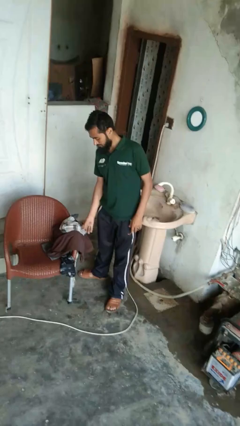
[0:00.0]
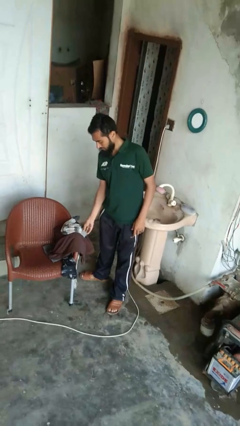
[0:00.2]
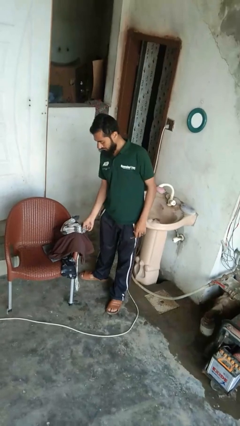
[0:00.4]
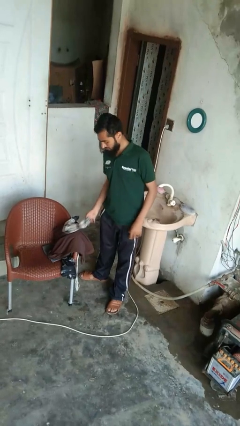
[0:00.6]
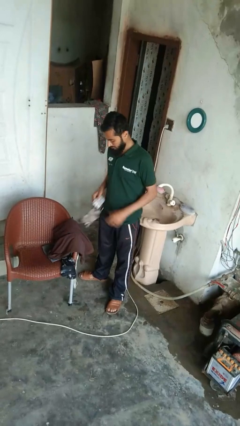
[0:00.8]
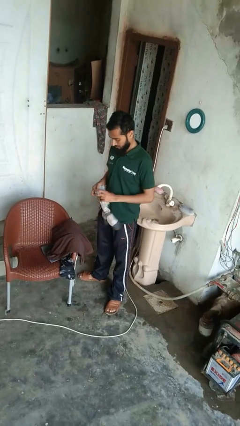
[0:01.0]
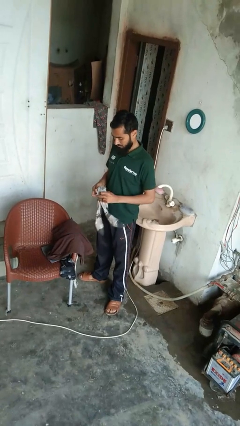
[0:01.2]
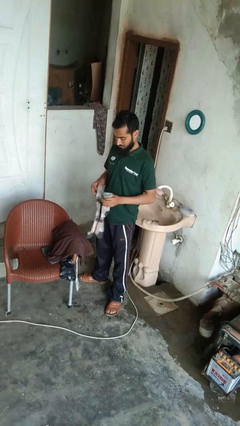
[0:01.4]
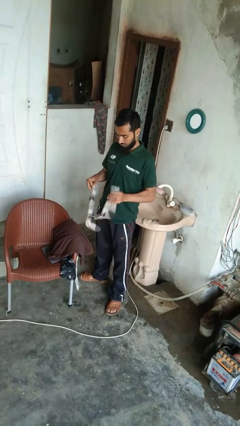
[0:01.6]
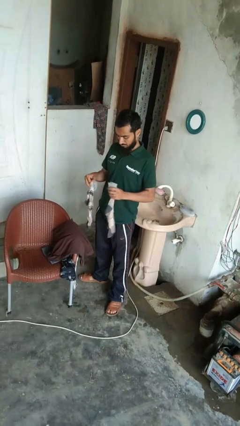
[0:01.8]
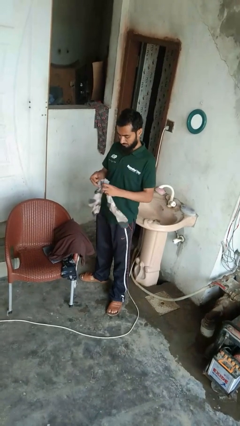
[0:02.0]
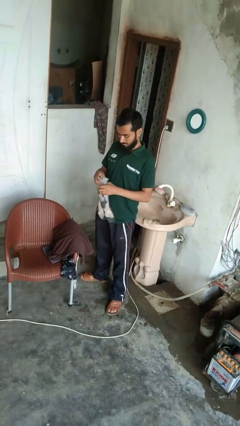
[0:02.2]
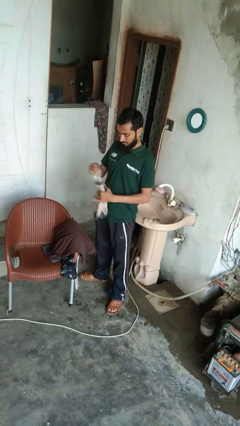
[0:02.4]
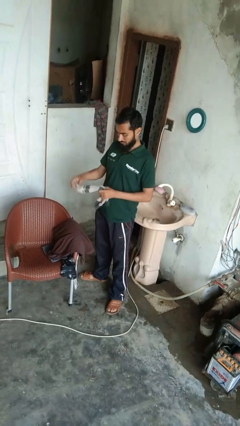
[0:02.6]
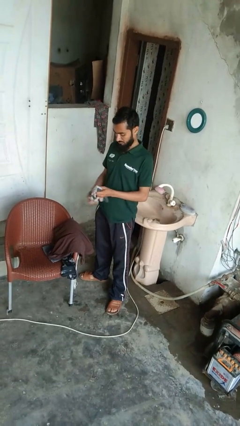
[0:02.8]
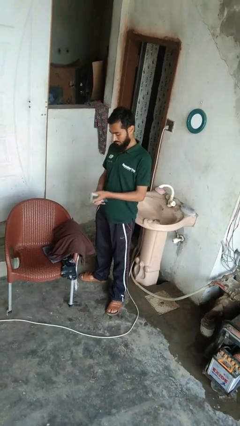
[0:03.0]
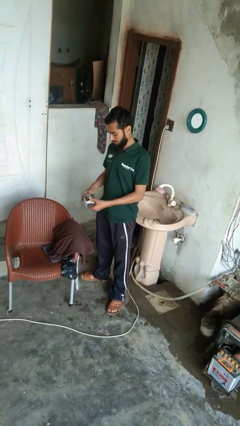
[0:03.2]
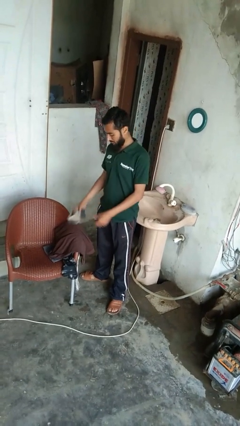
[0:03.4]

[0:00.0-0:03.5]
person folds socks

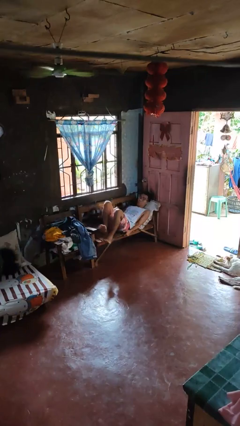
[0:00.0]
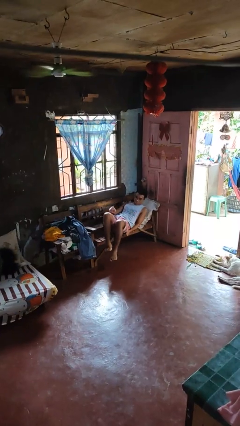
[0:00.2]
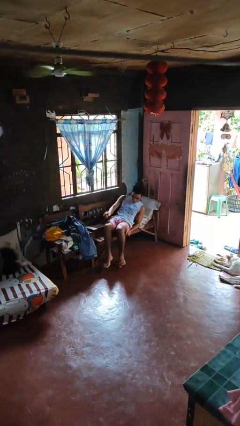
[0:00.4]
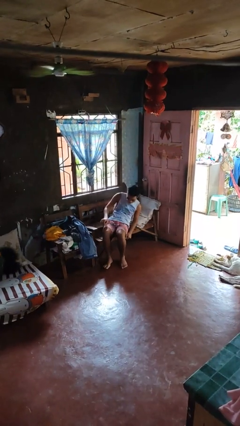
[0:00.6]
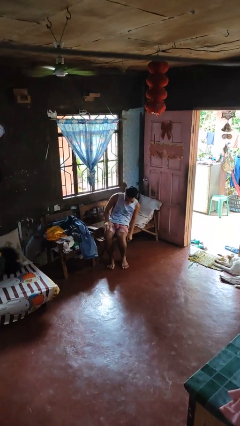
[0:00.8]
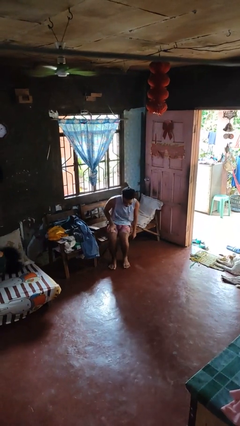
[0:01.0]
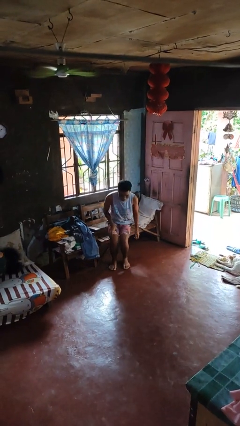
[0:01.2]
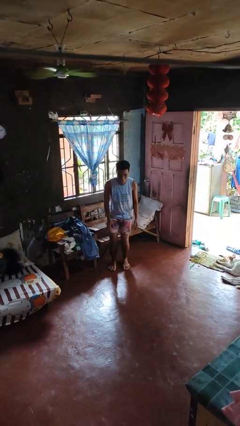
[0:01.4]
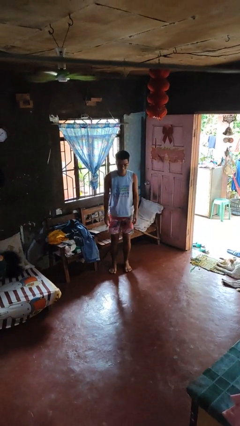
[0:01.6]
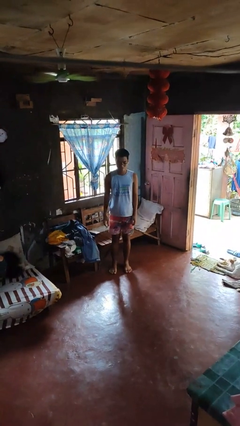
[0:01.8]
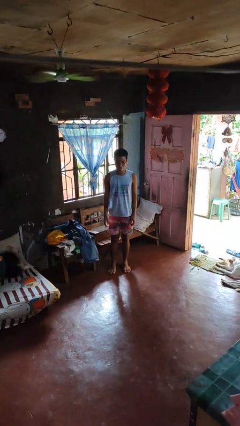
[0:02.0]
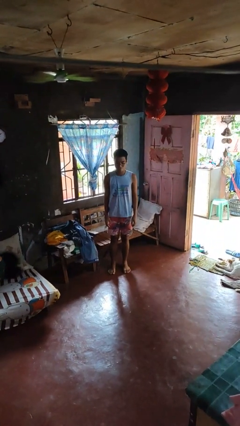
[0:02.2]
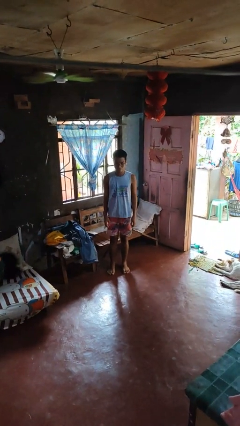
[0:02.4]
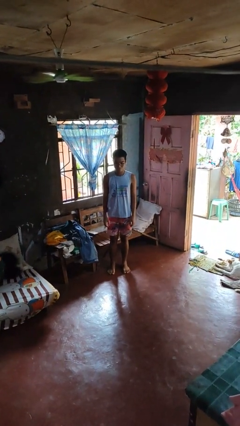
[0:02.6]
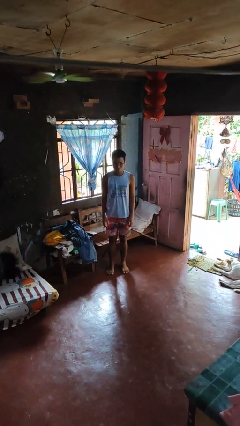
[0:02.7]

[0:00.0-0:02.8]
person stands up

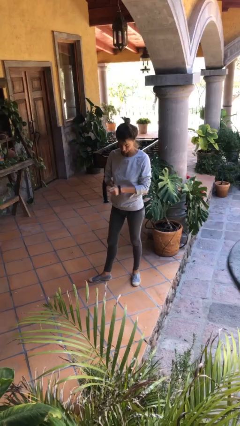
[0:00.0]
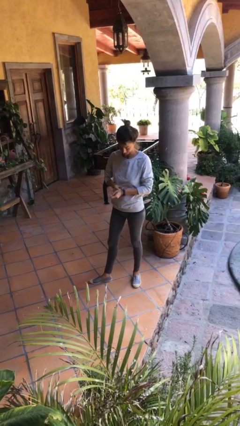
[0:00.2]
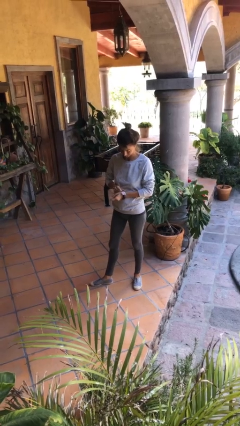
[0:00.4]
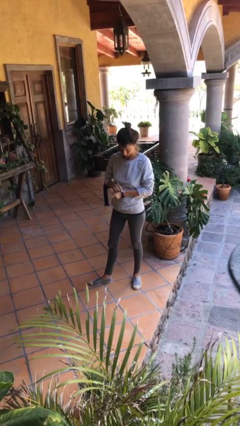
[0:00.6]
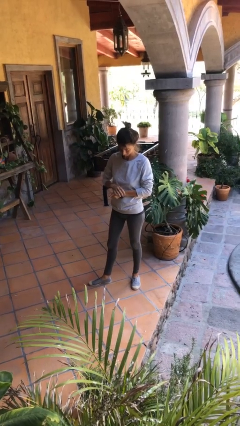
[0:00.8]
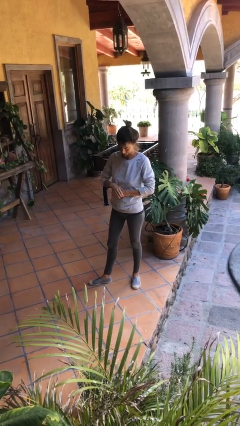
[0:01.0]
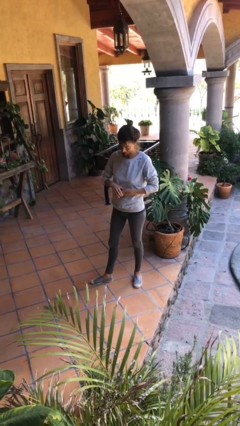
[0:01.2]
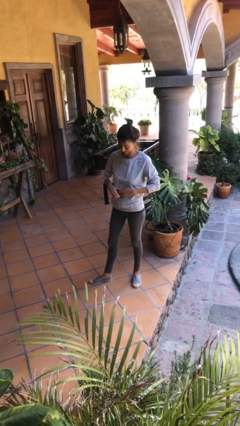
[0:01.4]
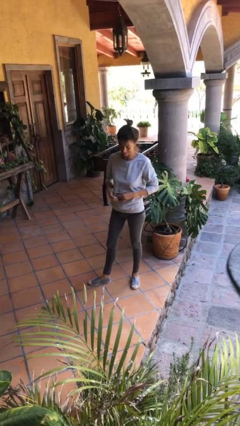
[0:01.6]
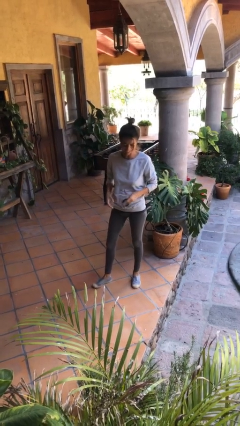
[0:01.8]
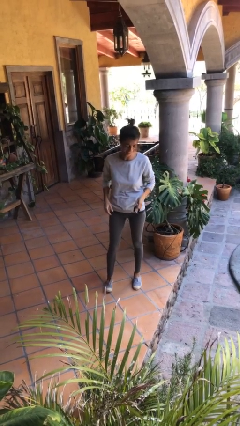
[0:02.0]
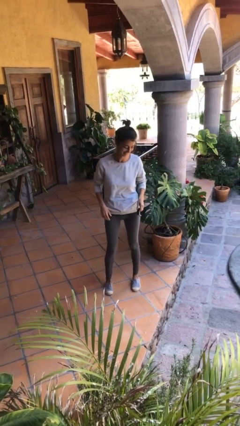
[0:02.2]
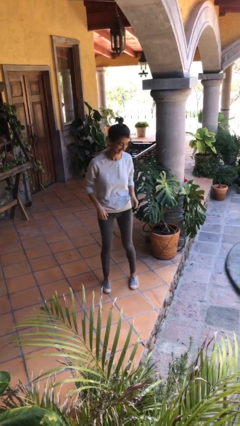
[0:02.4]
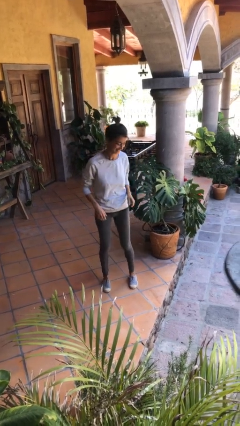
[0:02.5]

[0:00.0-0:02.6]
person takes off wristwatch

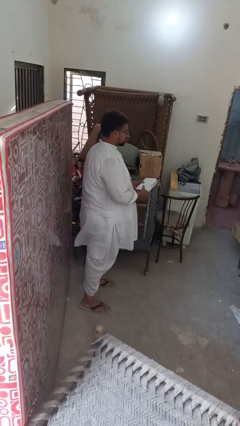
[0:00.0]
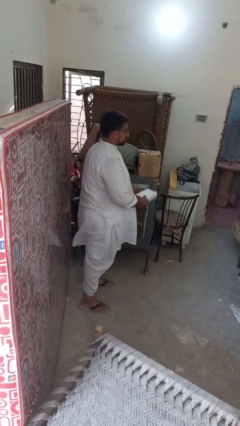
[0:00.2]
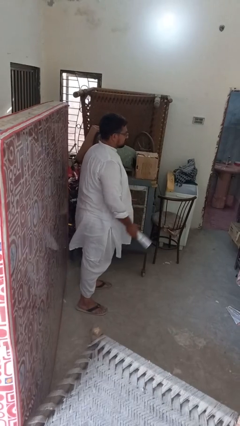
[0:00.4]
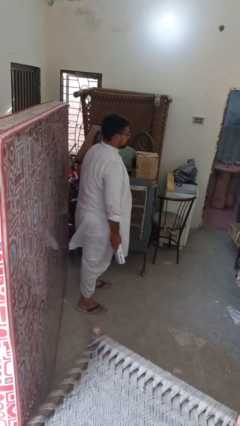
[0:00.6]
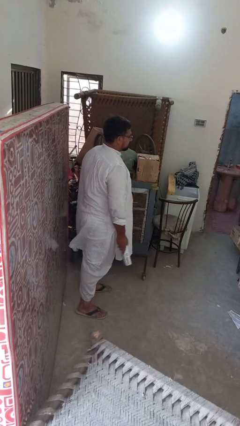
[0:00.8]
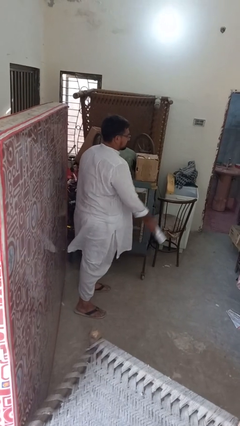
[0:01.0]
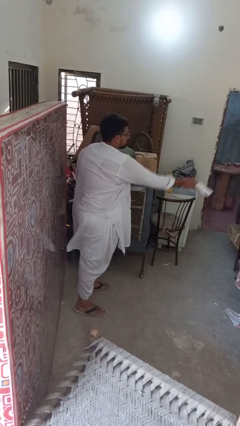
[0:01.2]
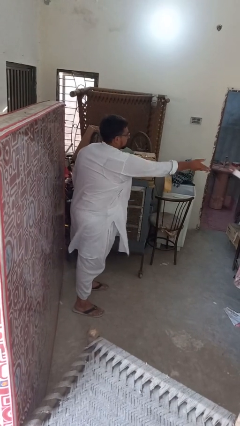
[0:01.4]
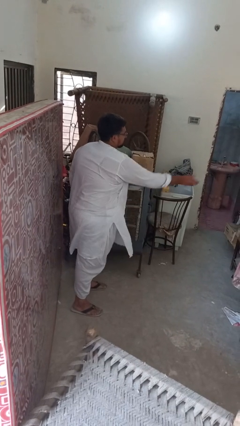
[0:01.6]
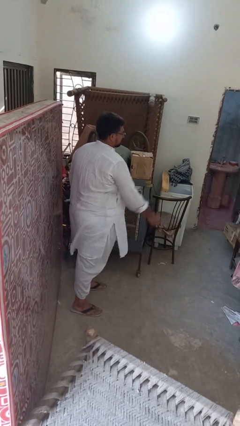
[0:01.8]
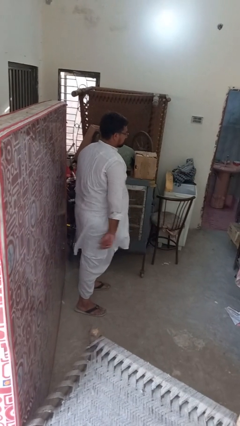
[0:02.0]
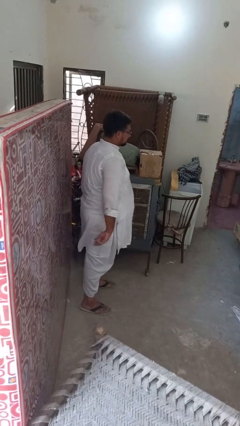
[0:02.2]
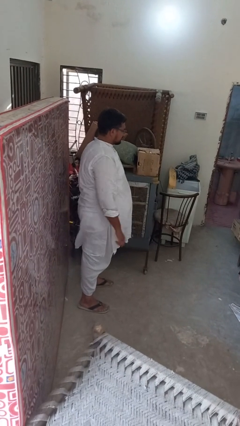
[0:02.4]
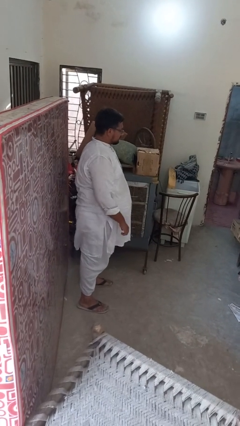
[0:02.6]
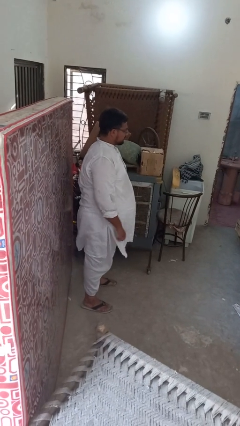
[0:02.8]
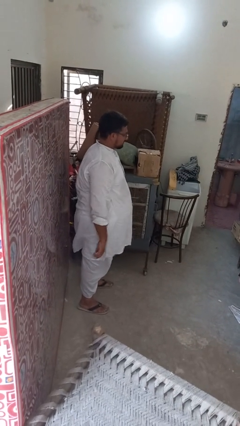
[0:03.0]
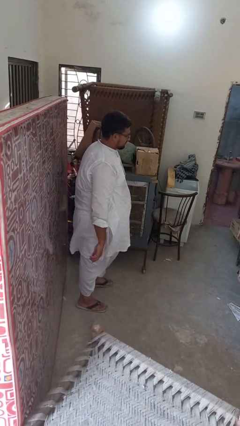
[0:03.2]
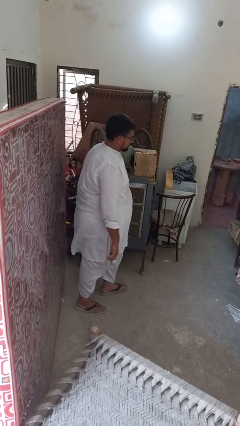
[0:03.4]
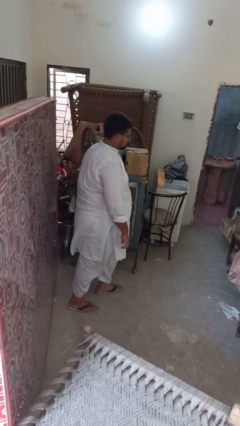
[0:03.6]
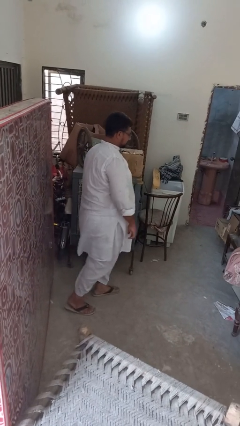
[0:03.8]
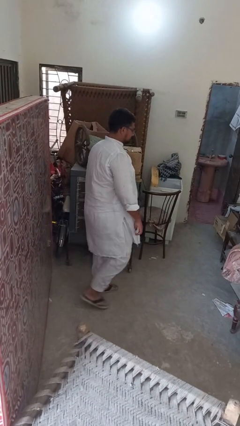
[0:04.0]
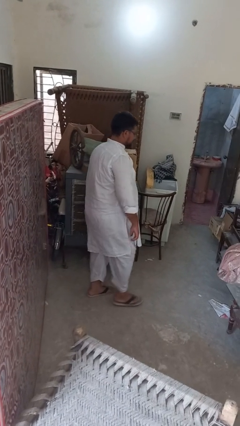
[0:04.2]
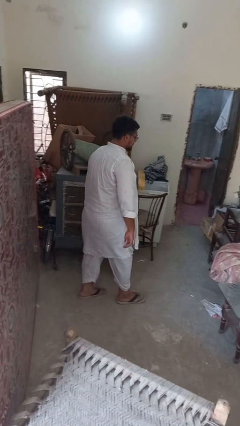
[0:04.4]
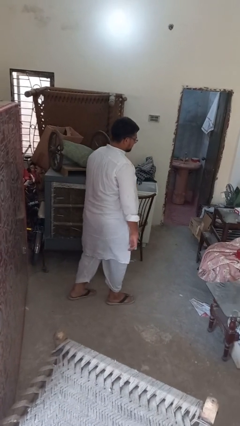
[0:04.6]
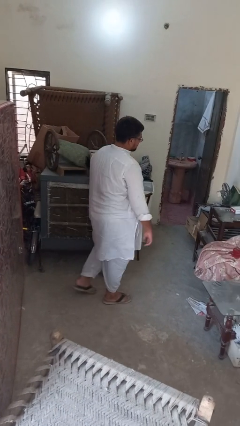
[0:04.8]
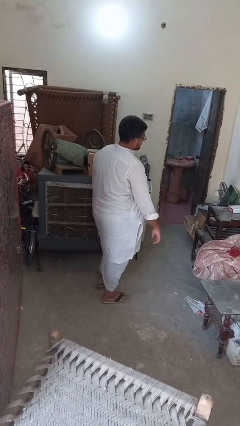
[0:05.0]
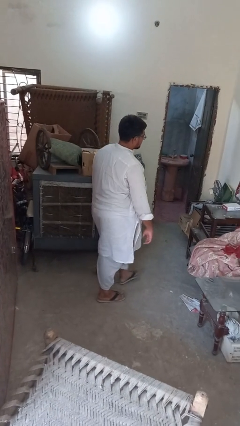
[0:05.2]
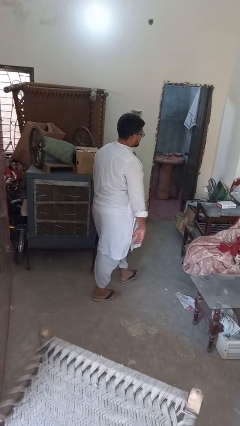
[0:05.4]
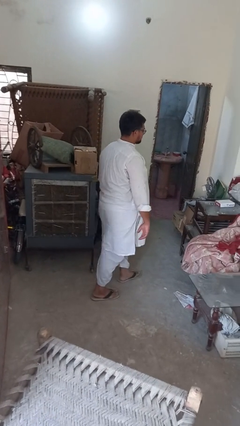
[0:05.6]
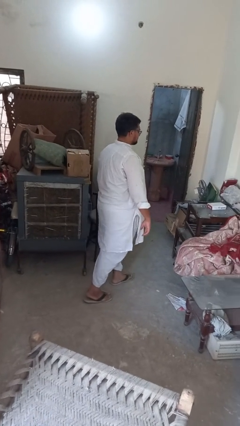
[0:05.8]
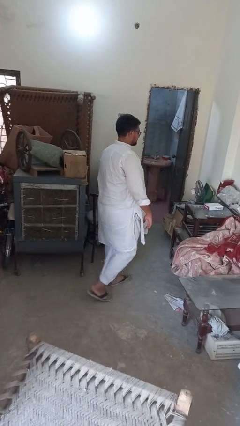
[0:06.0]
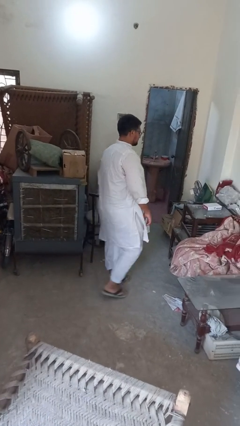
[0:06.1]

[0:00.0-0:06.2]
person throws object on table

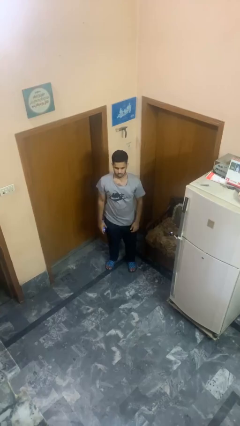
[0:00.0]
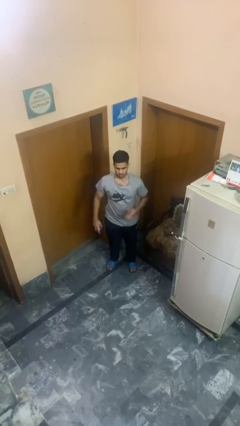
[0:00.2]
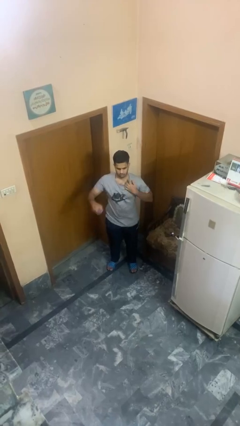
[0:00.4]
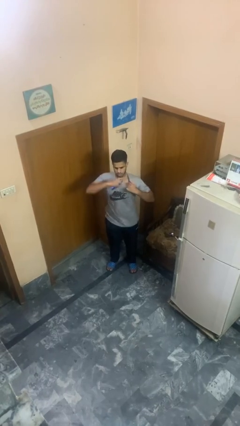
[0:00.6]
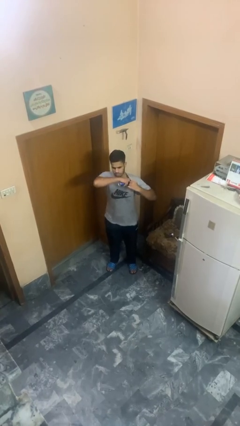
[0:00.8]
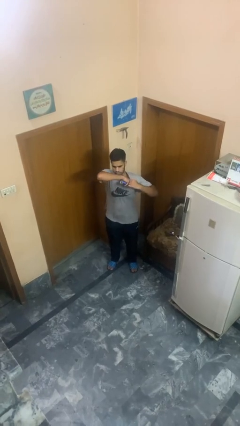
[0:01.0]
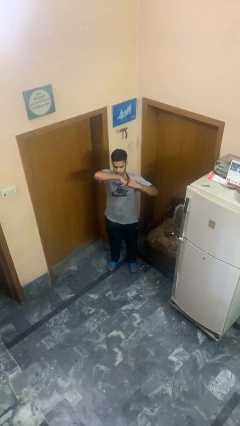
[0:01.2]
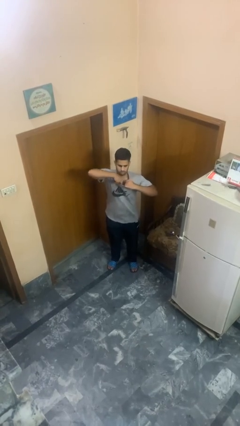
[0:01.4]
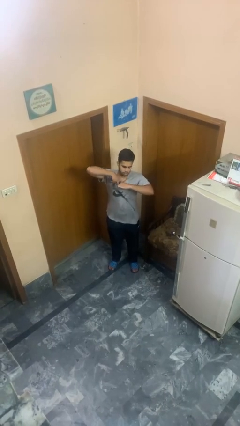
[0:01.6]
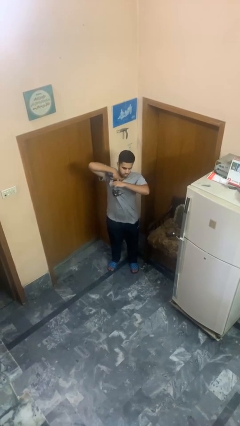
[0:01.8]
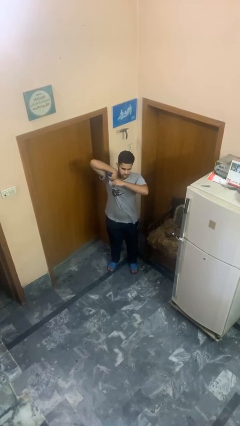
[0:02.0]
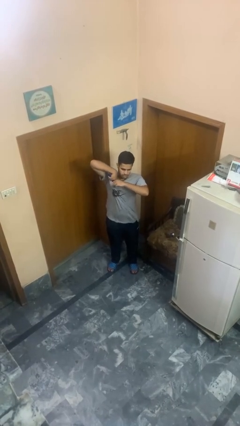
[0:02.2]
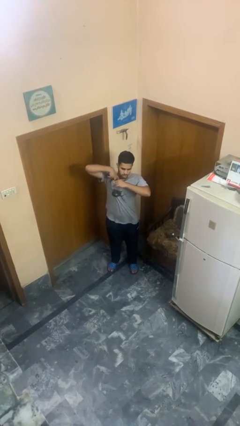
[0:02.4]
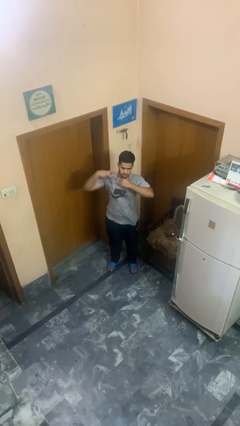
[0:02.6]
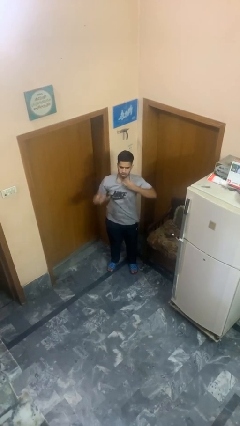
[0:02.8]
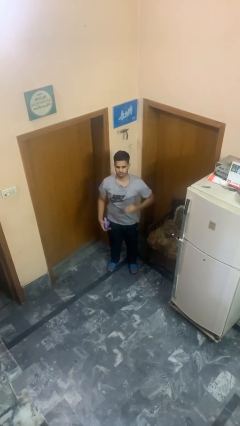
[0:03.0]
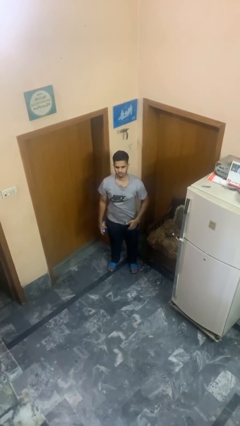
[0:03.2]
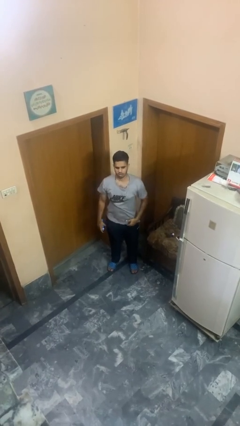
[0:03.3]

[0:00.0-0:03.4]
person applies deodorant
